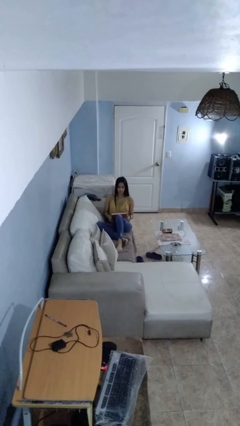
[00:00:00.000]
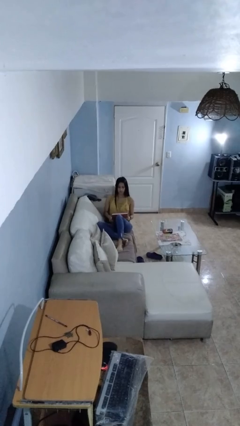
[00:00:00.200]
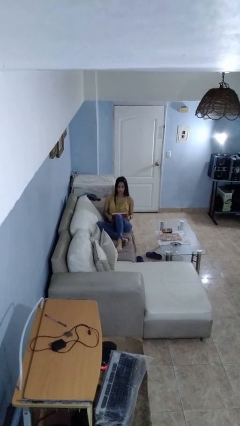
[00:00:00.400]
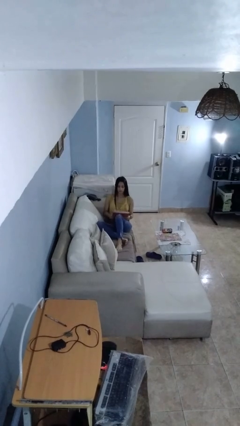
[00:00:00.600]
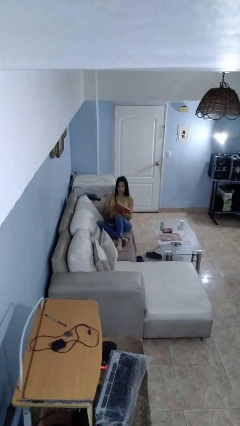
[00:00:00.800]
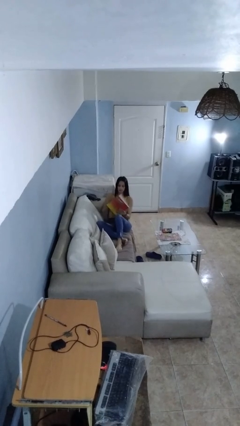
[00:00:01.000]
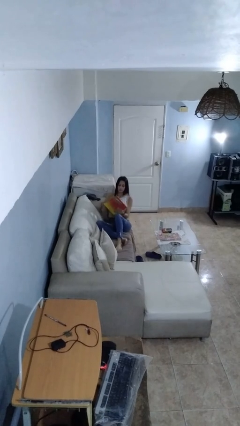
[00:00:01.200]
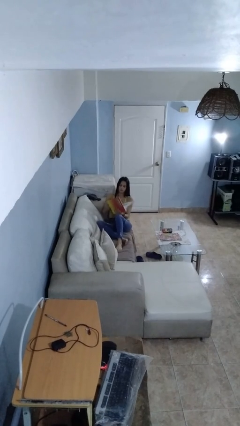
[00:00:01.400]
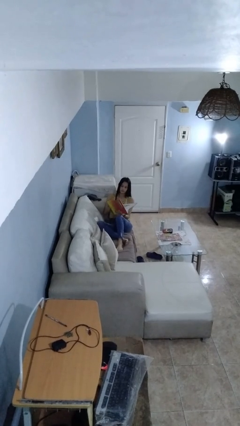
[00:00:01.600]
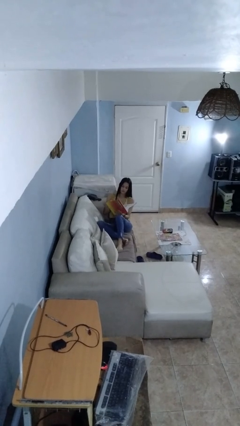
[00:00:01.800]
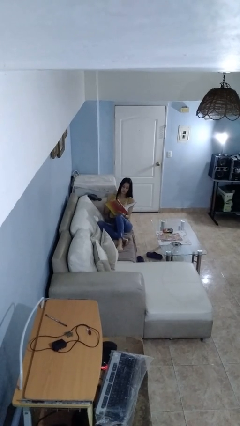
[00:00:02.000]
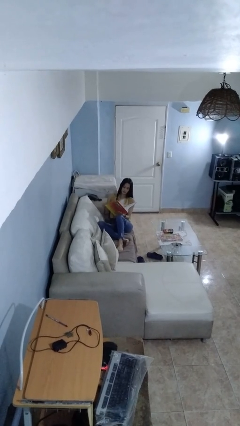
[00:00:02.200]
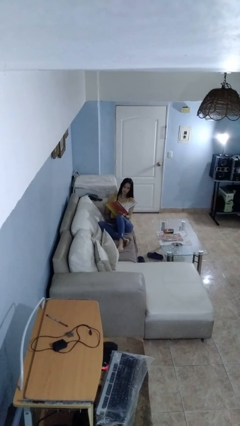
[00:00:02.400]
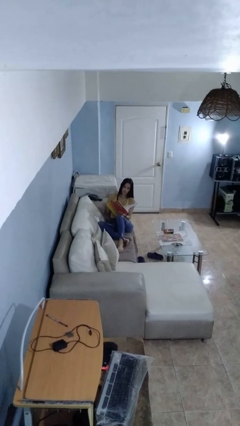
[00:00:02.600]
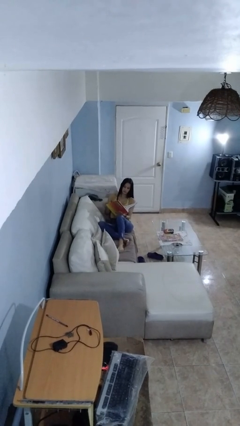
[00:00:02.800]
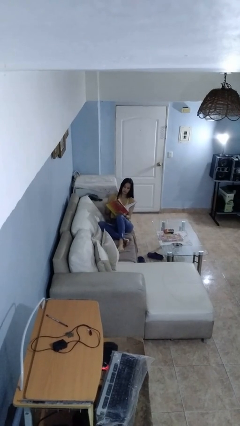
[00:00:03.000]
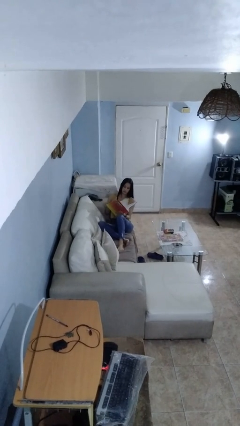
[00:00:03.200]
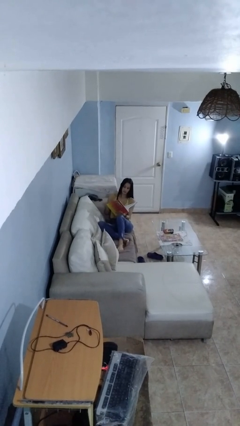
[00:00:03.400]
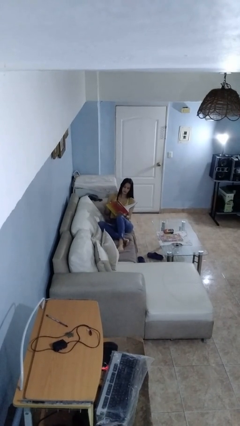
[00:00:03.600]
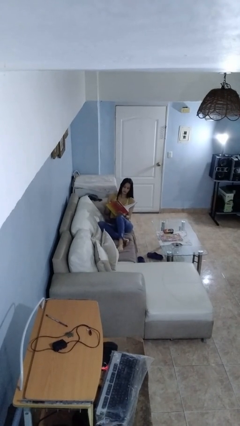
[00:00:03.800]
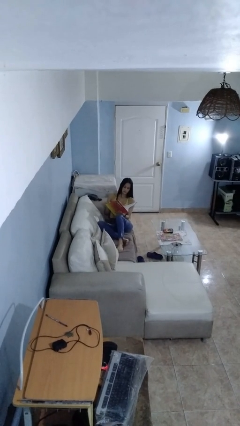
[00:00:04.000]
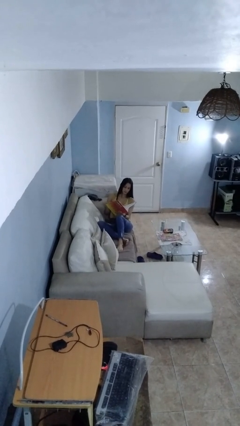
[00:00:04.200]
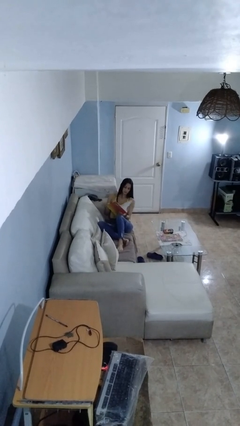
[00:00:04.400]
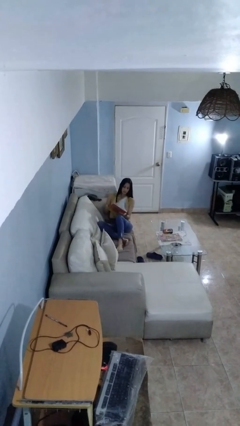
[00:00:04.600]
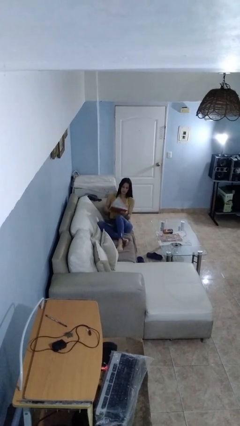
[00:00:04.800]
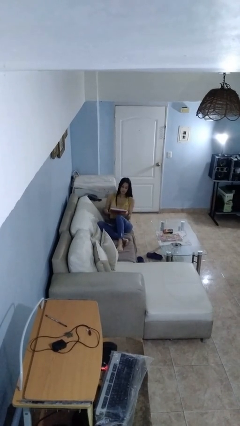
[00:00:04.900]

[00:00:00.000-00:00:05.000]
person reads book

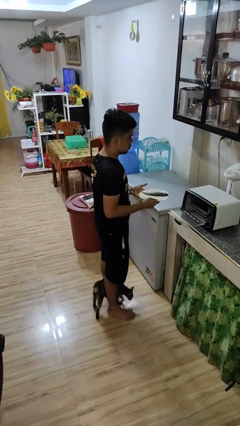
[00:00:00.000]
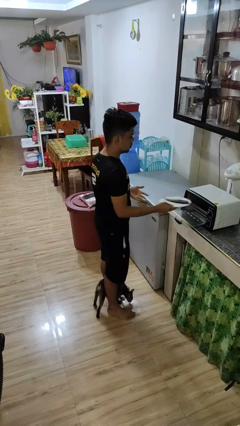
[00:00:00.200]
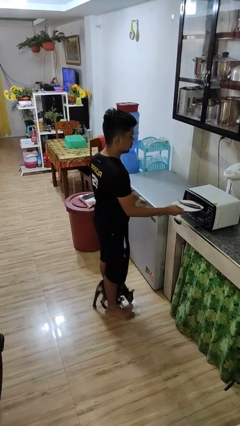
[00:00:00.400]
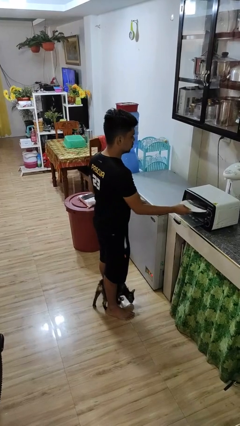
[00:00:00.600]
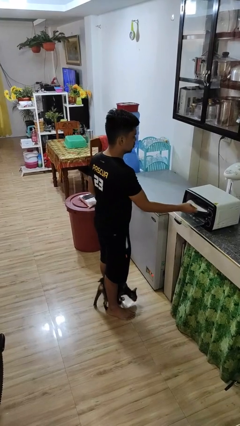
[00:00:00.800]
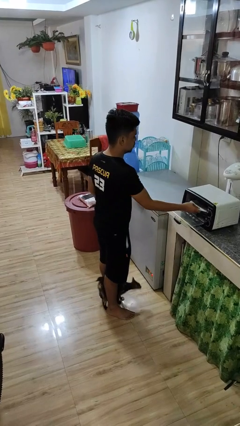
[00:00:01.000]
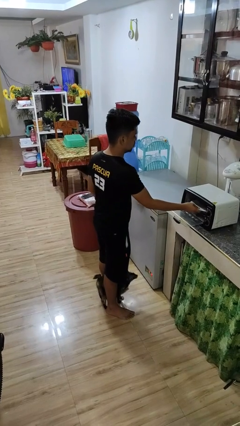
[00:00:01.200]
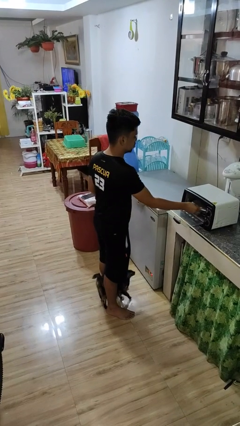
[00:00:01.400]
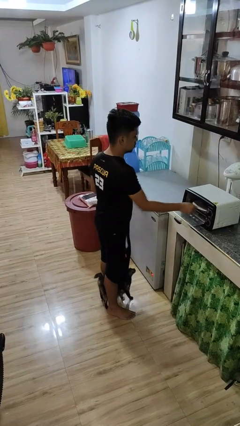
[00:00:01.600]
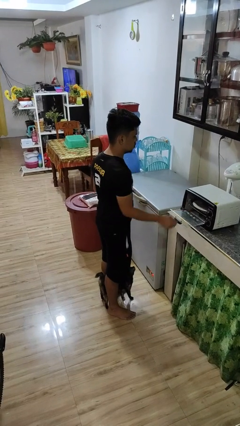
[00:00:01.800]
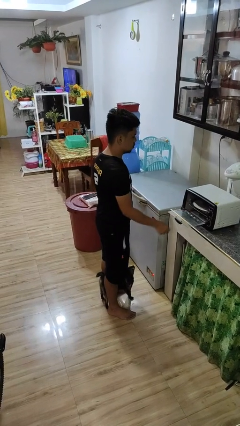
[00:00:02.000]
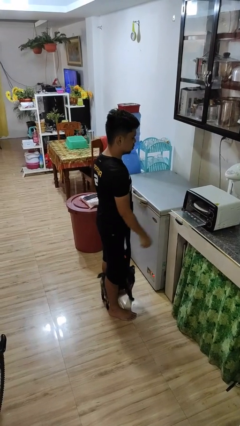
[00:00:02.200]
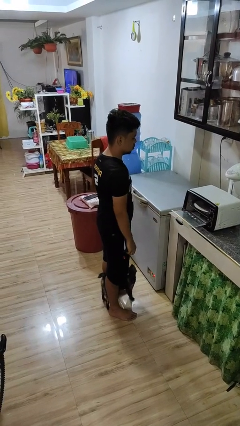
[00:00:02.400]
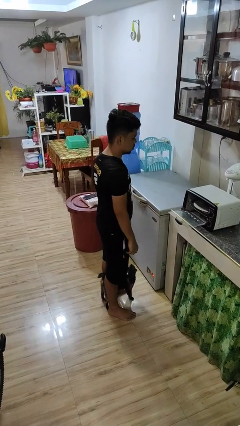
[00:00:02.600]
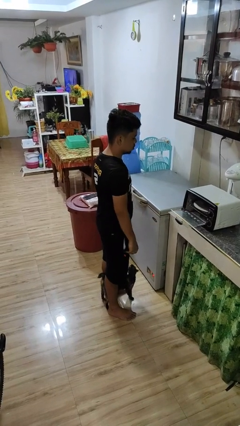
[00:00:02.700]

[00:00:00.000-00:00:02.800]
person puts object into microwave

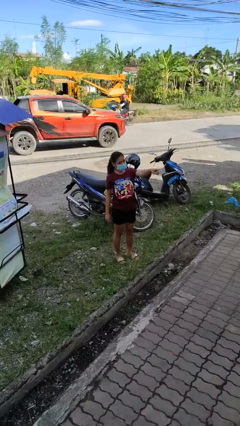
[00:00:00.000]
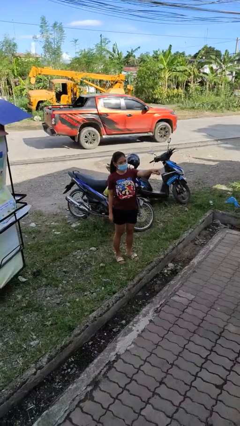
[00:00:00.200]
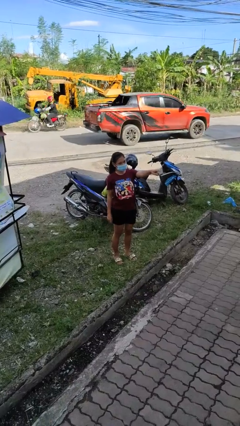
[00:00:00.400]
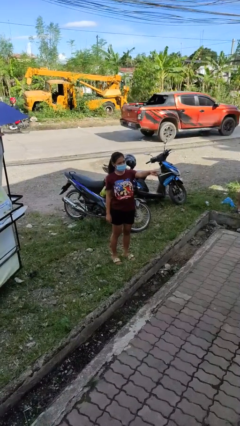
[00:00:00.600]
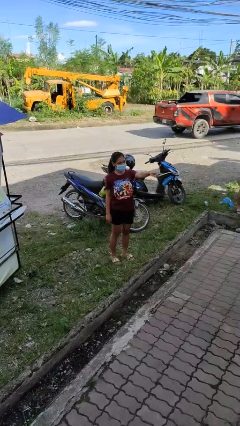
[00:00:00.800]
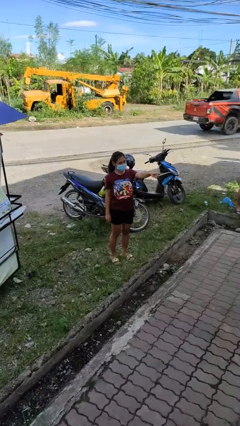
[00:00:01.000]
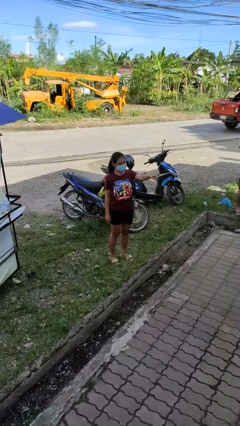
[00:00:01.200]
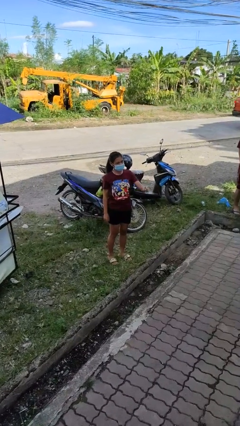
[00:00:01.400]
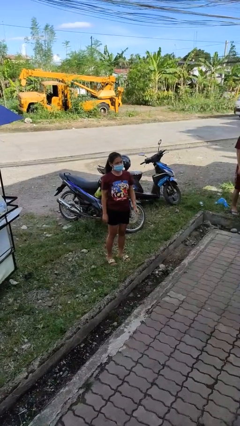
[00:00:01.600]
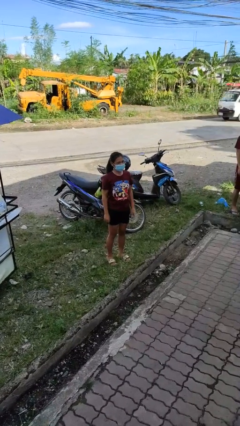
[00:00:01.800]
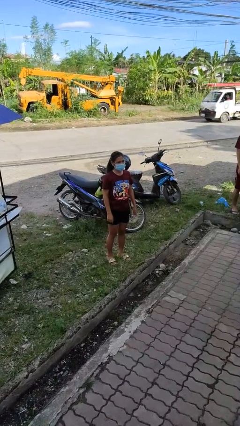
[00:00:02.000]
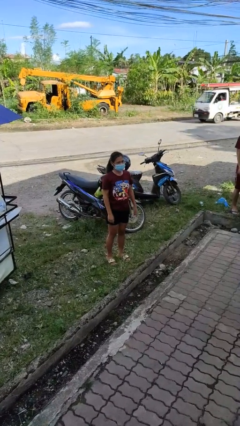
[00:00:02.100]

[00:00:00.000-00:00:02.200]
person points at person

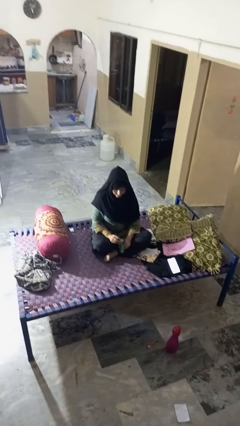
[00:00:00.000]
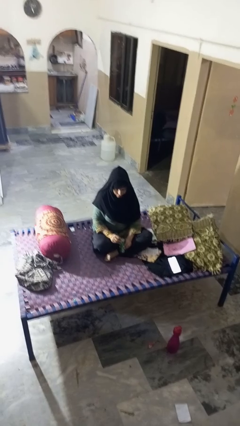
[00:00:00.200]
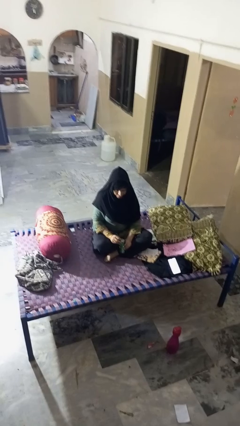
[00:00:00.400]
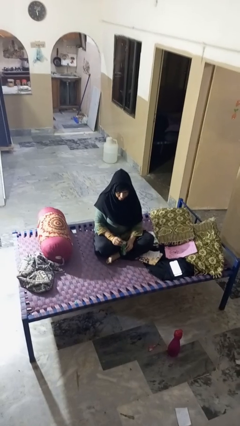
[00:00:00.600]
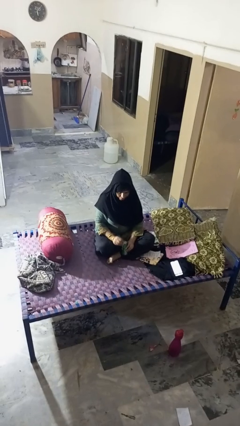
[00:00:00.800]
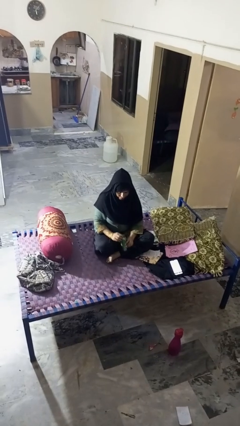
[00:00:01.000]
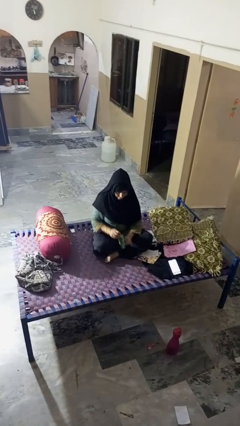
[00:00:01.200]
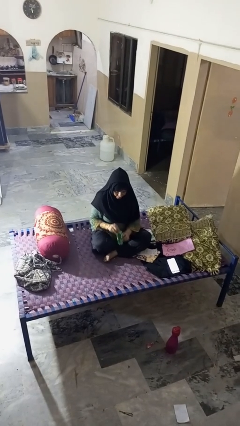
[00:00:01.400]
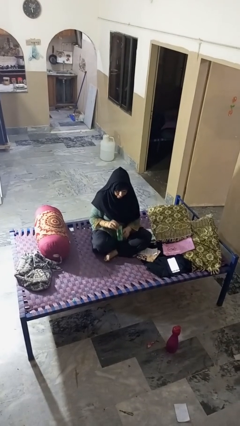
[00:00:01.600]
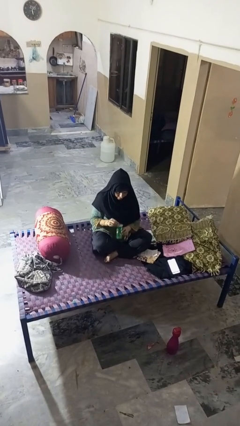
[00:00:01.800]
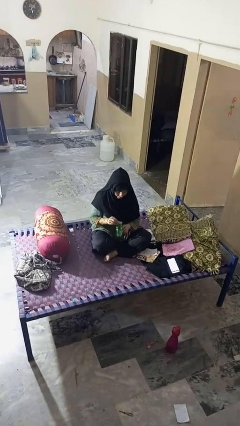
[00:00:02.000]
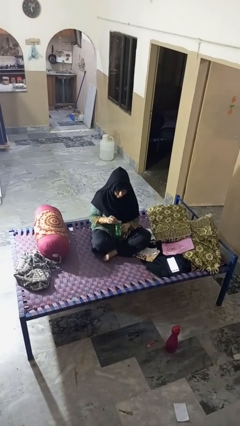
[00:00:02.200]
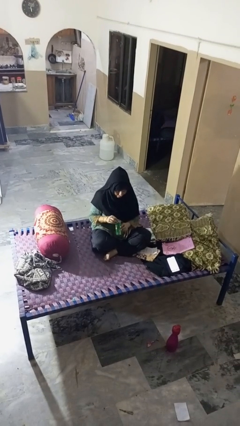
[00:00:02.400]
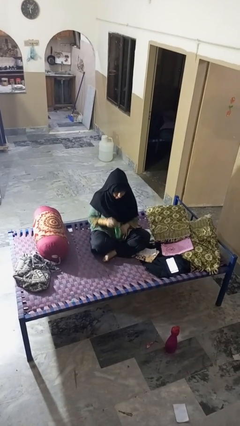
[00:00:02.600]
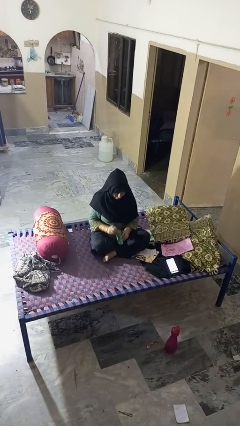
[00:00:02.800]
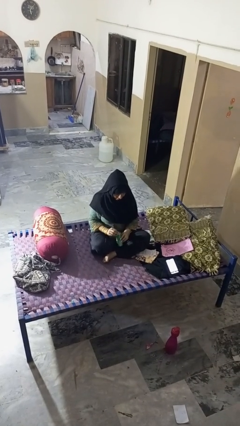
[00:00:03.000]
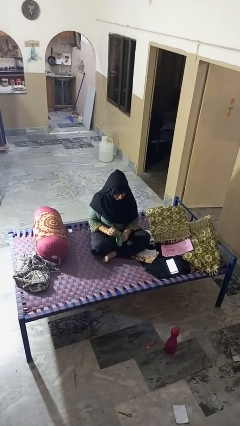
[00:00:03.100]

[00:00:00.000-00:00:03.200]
person opens can with can opener

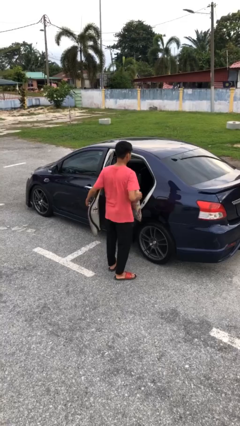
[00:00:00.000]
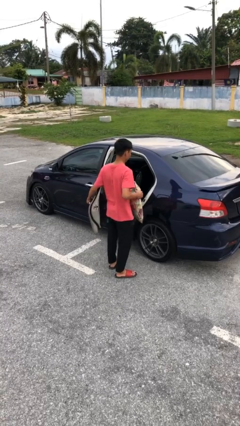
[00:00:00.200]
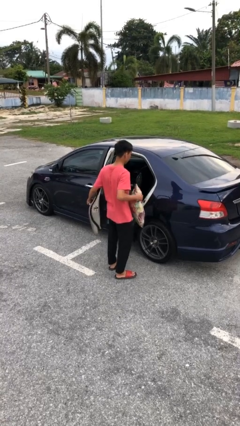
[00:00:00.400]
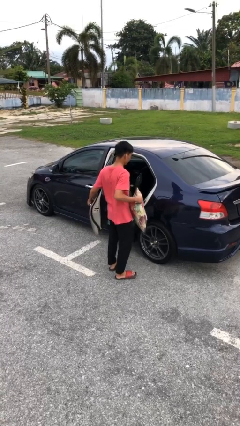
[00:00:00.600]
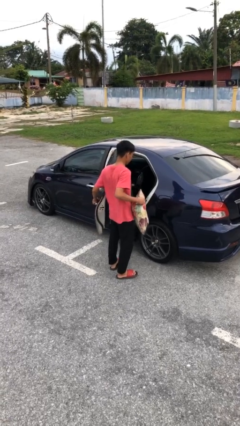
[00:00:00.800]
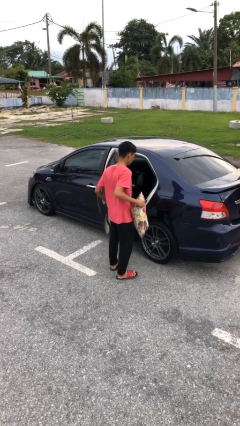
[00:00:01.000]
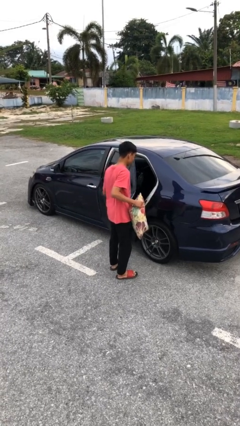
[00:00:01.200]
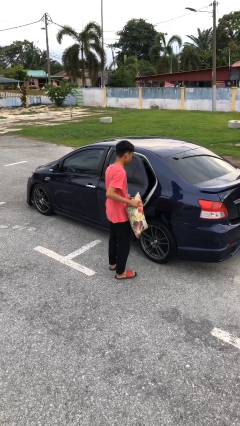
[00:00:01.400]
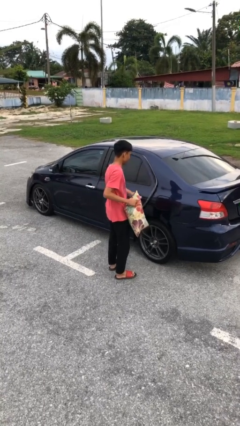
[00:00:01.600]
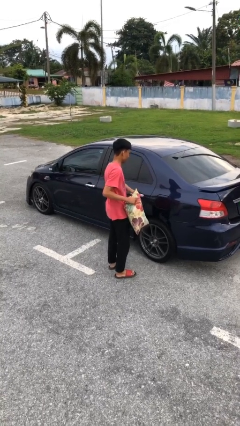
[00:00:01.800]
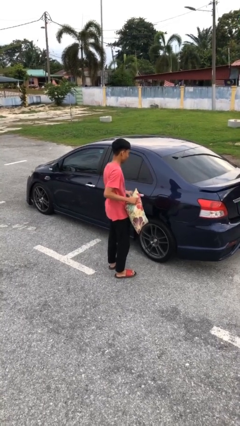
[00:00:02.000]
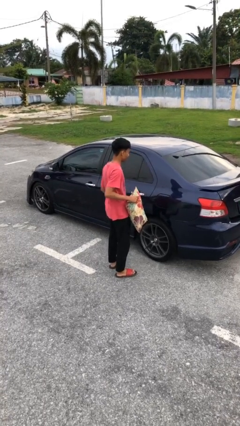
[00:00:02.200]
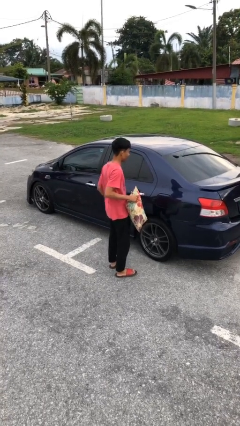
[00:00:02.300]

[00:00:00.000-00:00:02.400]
person closes car door

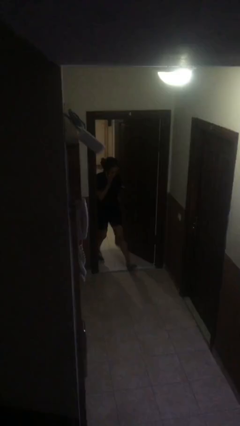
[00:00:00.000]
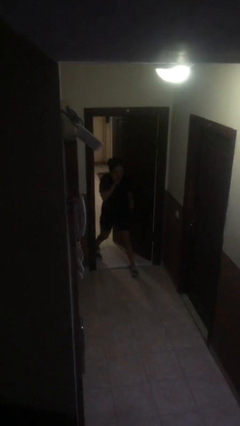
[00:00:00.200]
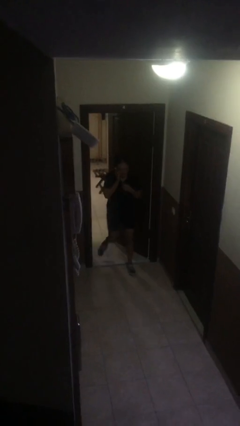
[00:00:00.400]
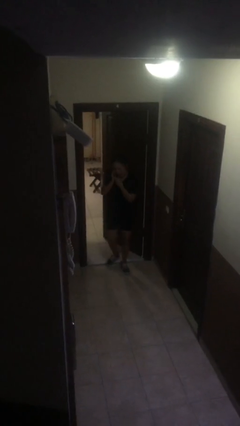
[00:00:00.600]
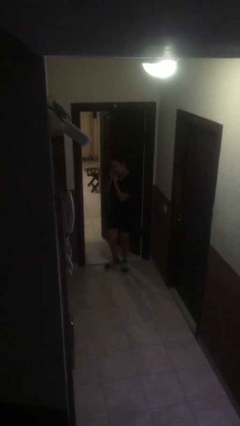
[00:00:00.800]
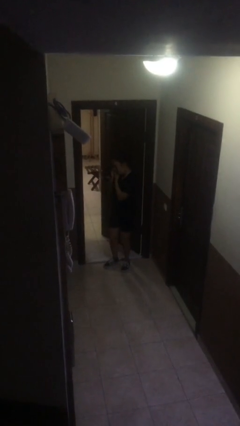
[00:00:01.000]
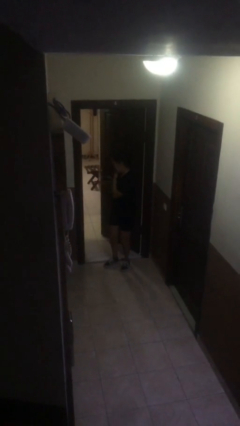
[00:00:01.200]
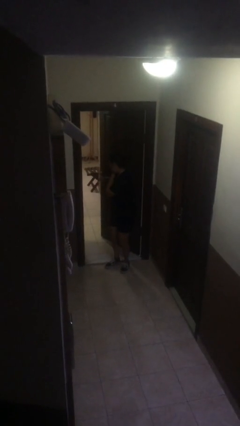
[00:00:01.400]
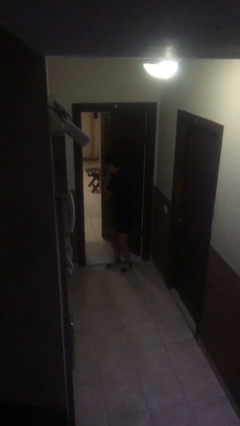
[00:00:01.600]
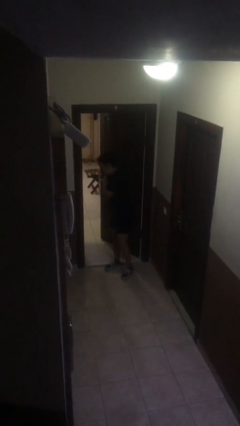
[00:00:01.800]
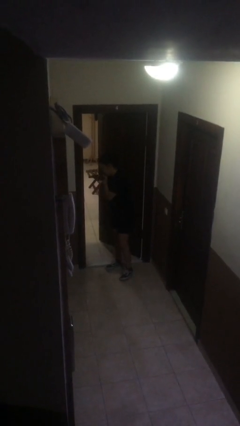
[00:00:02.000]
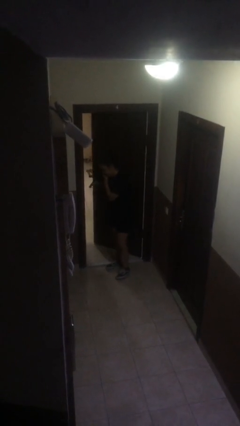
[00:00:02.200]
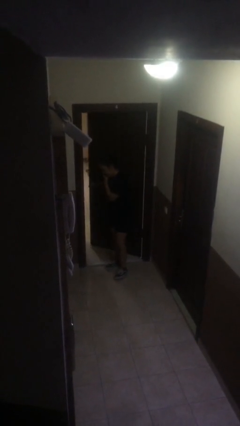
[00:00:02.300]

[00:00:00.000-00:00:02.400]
person enters scene through structure
